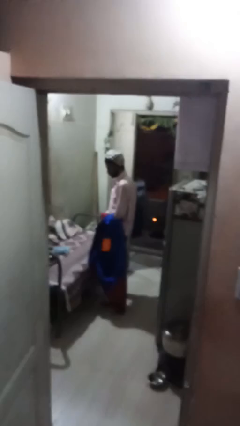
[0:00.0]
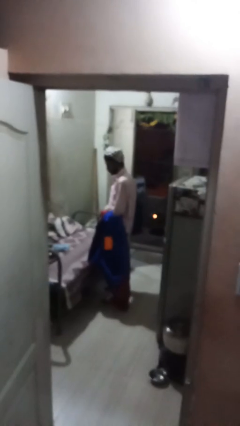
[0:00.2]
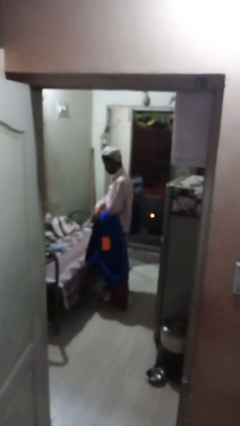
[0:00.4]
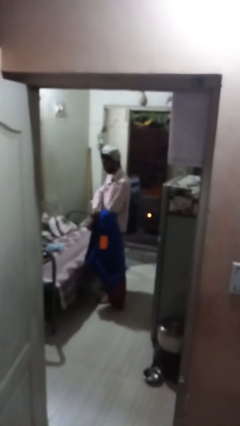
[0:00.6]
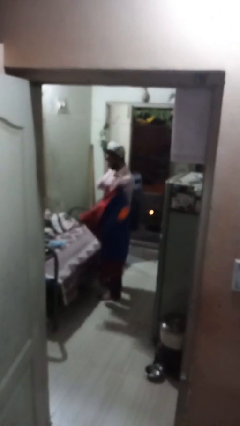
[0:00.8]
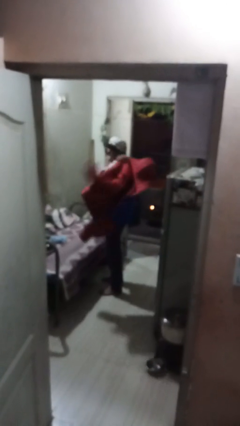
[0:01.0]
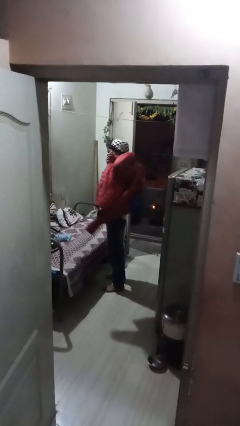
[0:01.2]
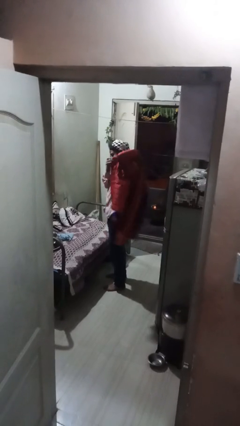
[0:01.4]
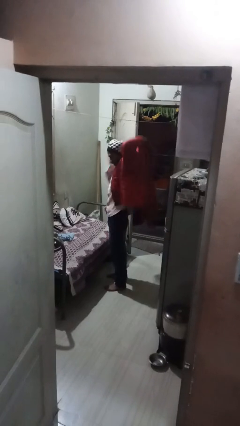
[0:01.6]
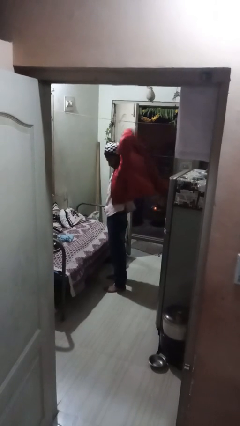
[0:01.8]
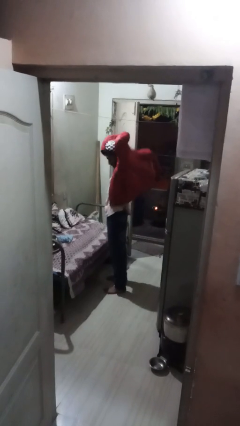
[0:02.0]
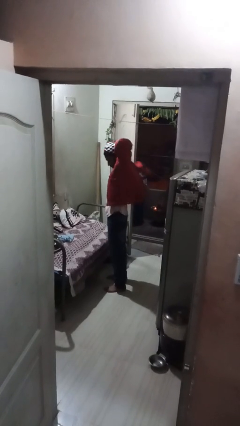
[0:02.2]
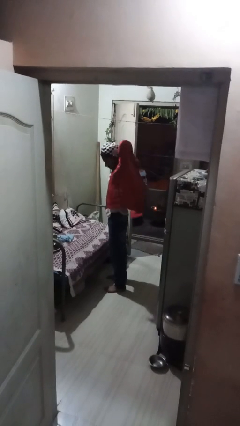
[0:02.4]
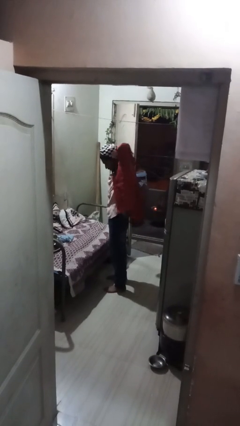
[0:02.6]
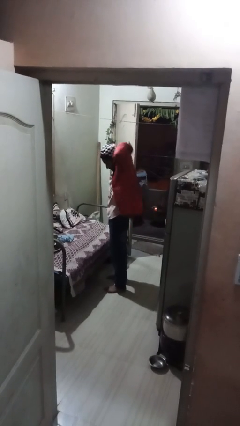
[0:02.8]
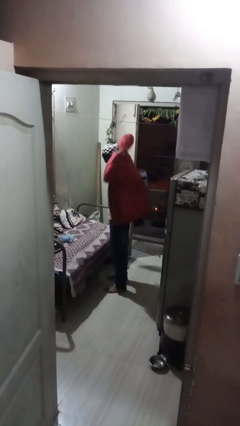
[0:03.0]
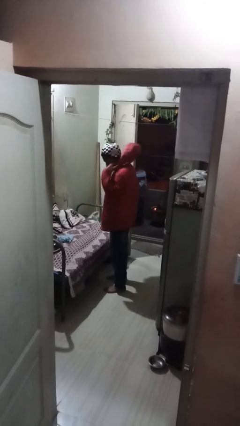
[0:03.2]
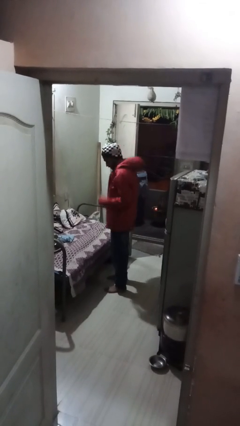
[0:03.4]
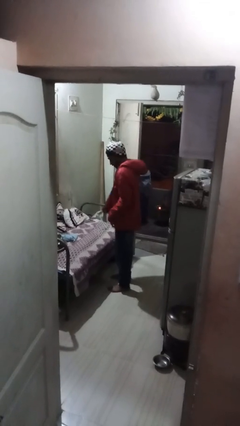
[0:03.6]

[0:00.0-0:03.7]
person puts on jacket

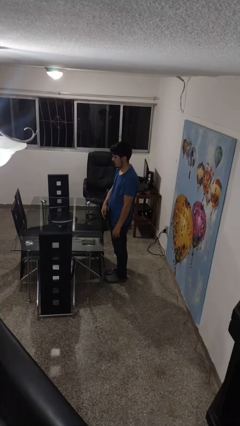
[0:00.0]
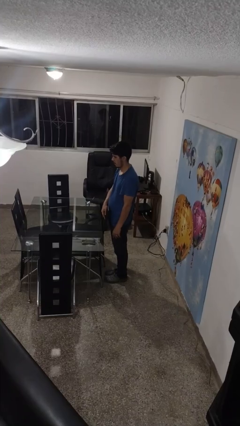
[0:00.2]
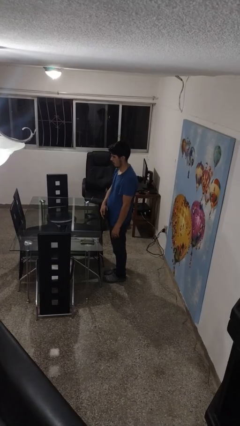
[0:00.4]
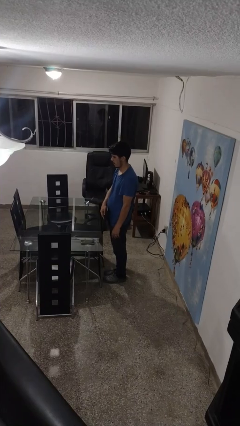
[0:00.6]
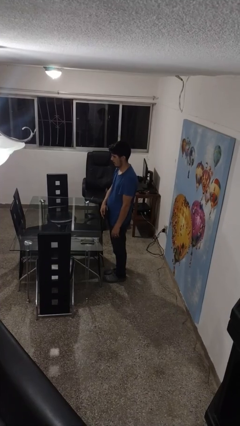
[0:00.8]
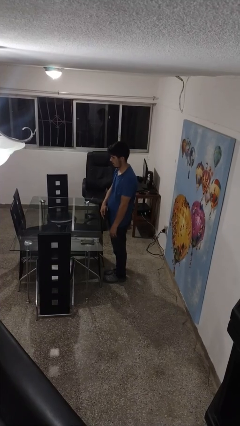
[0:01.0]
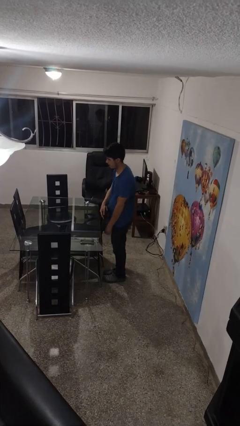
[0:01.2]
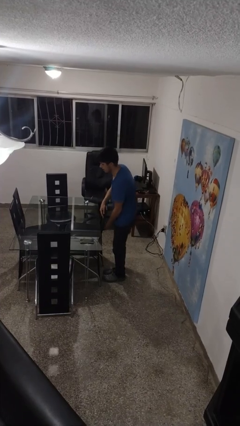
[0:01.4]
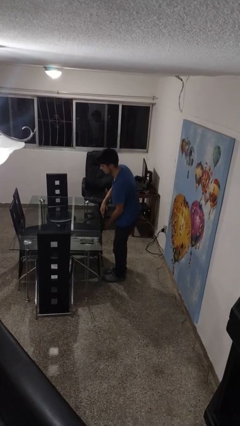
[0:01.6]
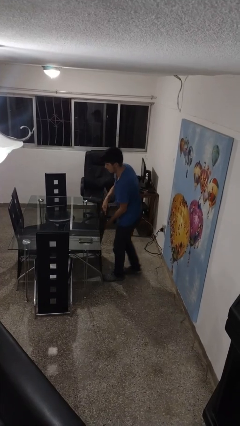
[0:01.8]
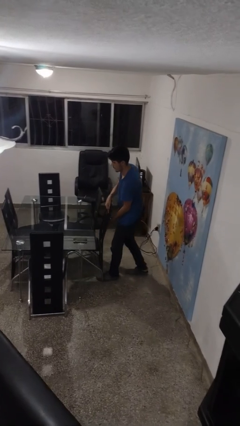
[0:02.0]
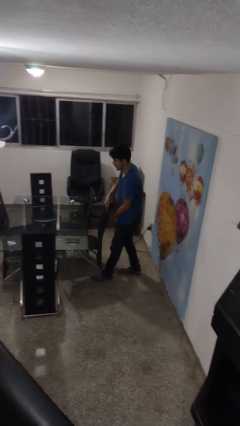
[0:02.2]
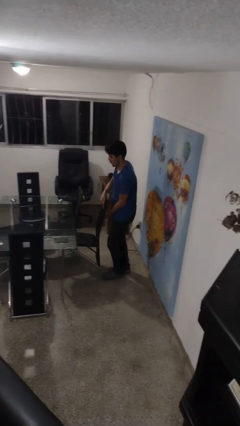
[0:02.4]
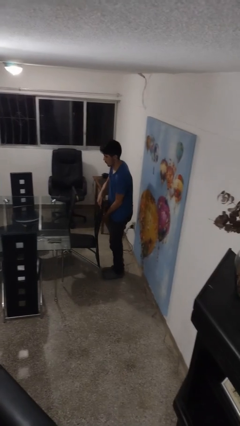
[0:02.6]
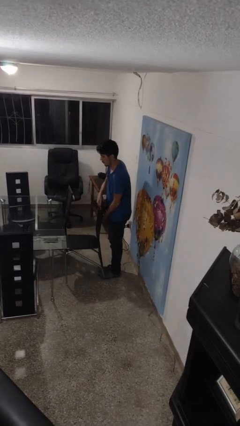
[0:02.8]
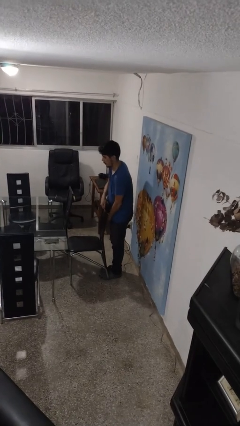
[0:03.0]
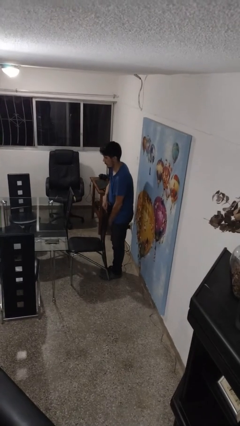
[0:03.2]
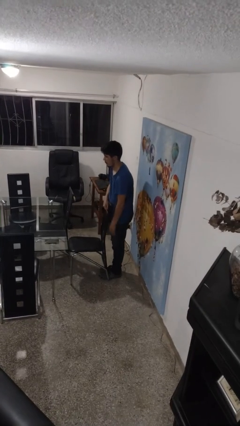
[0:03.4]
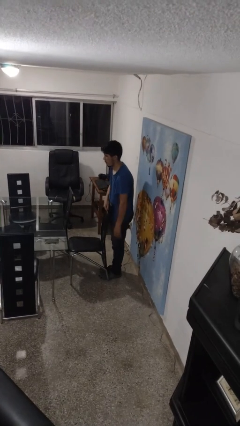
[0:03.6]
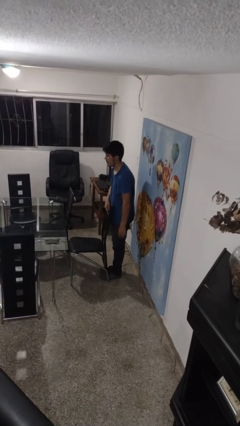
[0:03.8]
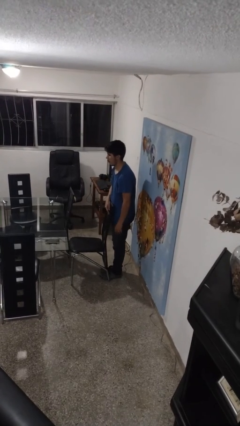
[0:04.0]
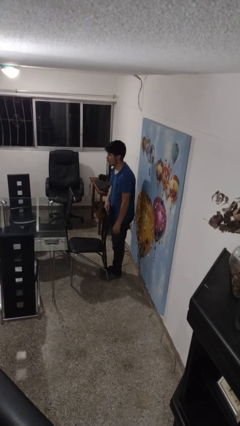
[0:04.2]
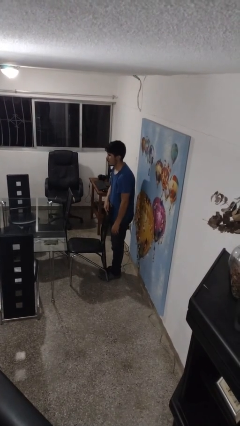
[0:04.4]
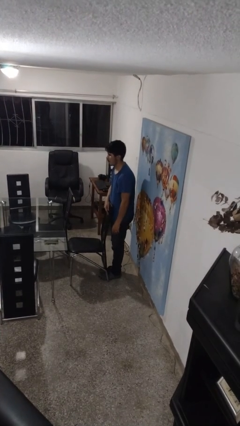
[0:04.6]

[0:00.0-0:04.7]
person pulls out chair

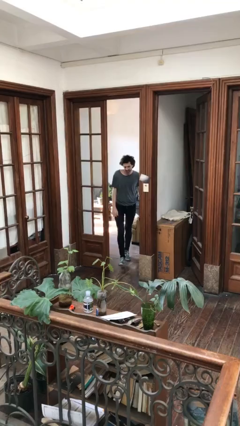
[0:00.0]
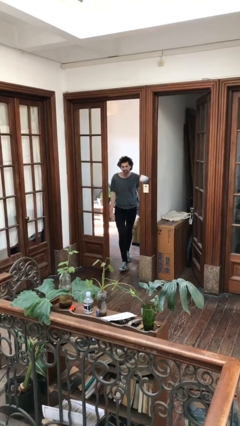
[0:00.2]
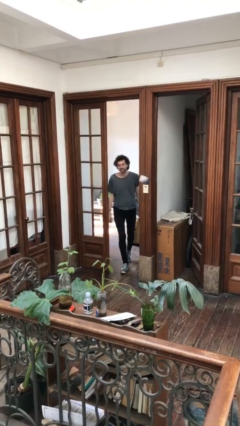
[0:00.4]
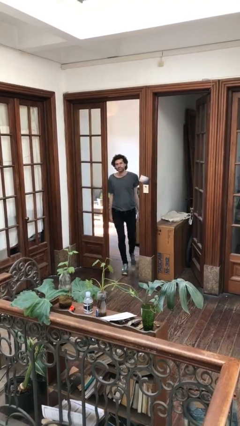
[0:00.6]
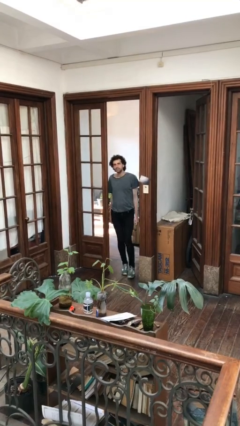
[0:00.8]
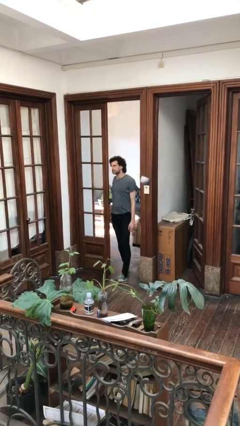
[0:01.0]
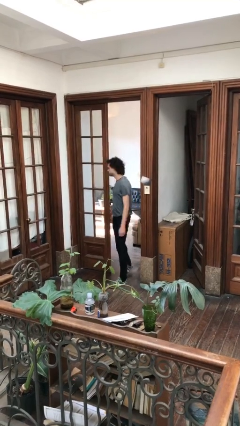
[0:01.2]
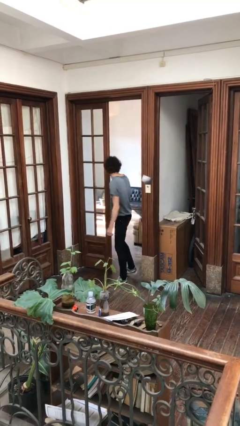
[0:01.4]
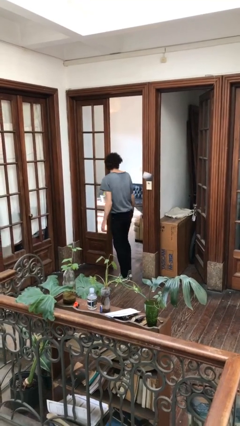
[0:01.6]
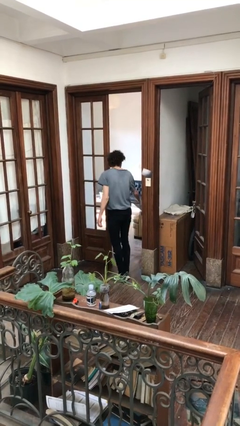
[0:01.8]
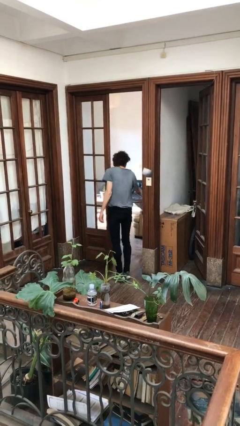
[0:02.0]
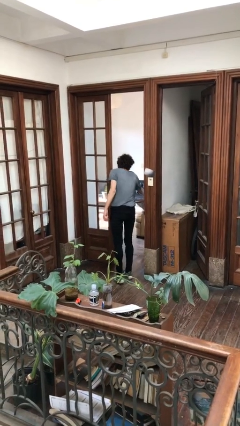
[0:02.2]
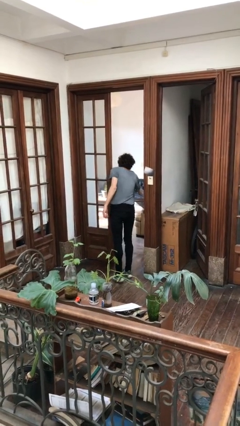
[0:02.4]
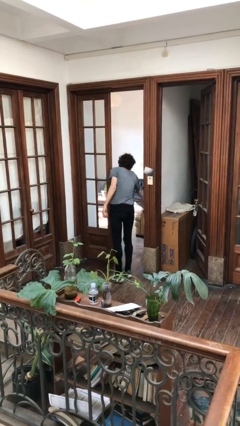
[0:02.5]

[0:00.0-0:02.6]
person enters scene through structure

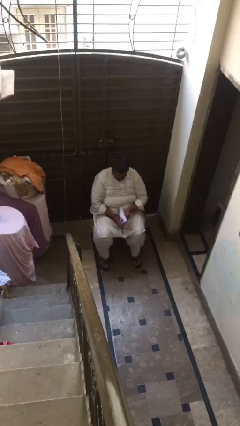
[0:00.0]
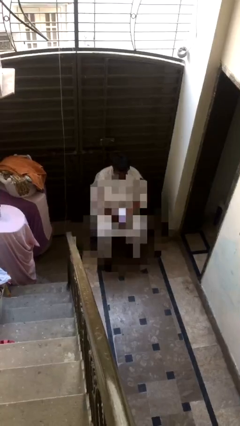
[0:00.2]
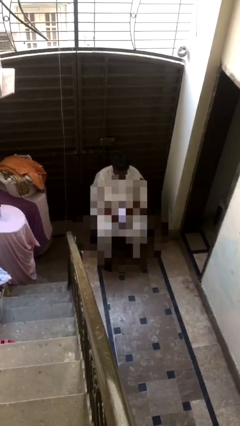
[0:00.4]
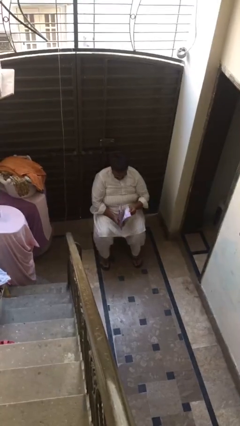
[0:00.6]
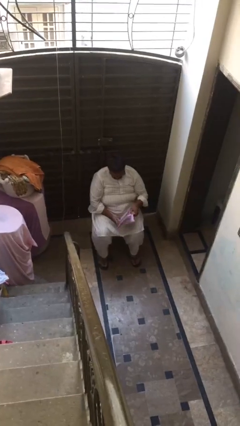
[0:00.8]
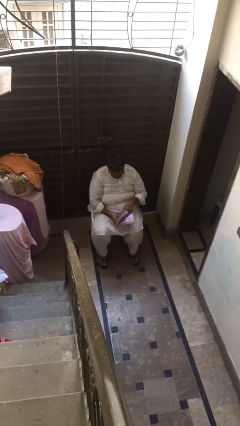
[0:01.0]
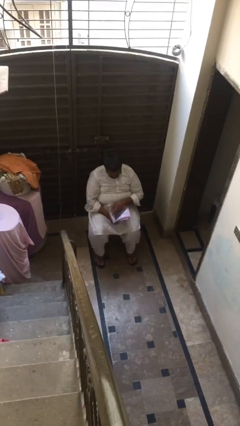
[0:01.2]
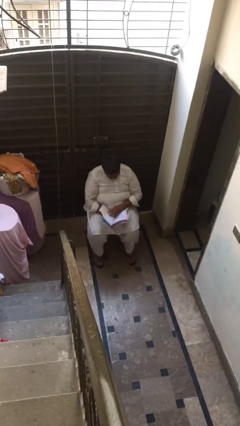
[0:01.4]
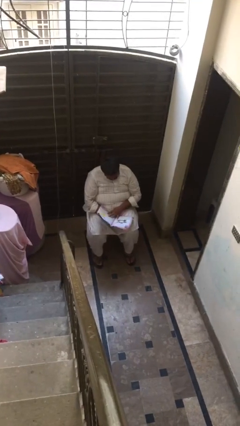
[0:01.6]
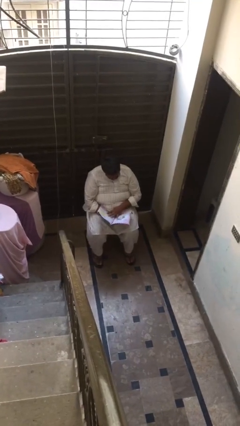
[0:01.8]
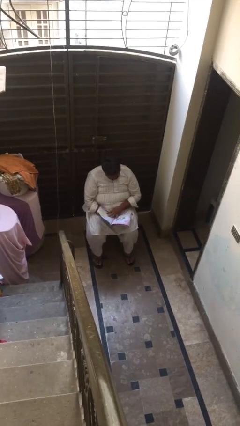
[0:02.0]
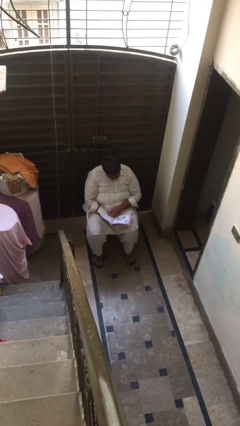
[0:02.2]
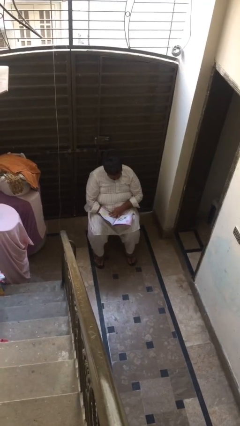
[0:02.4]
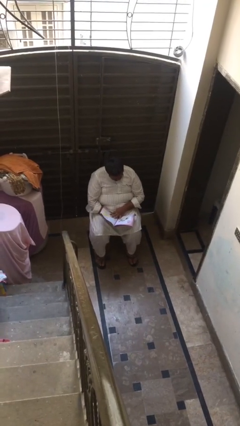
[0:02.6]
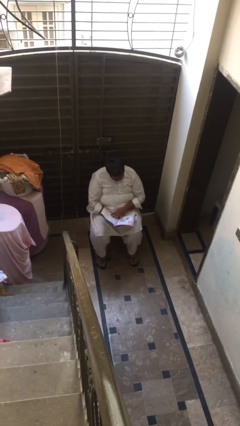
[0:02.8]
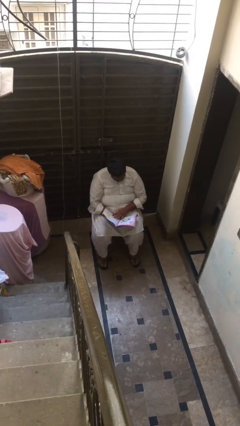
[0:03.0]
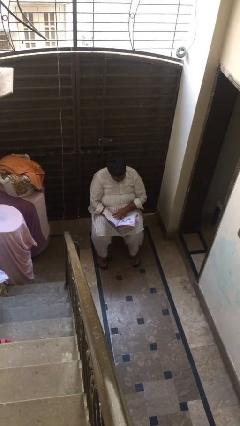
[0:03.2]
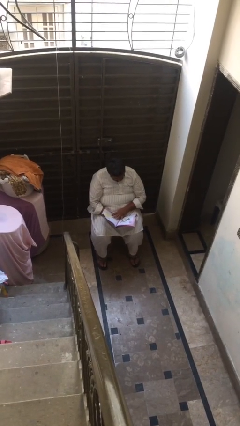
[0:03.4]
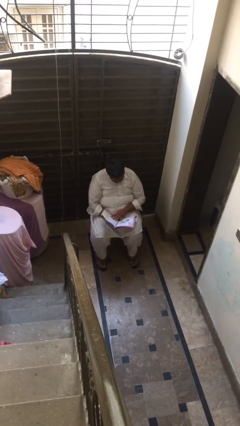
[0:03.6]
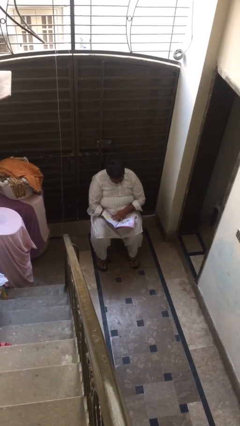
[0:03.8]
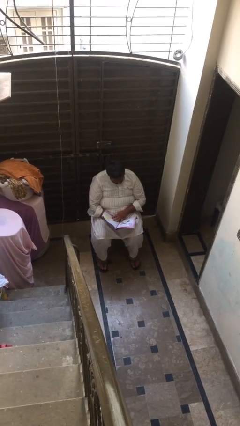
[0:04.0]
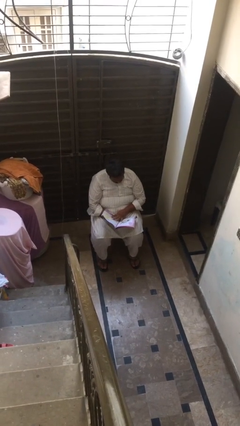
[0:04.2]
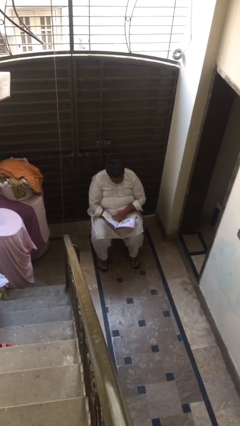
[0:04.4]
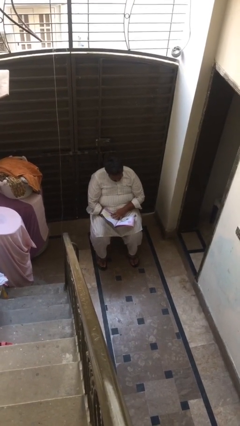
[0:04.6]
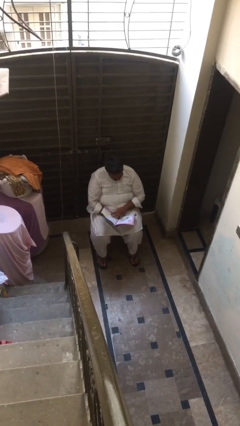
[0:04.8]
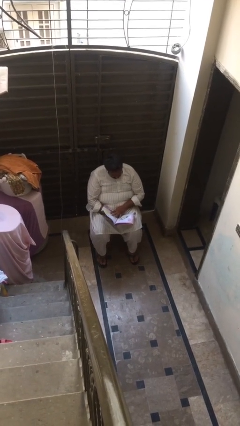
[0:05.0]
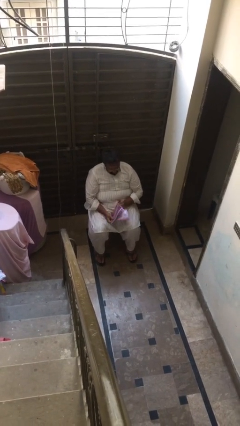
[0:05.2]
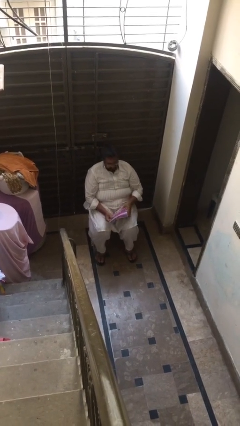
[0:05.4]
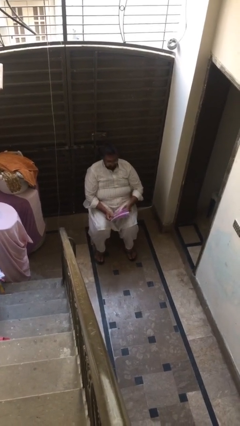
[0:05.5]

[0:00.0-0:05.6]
person reads document

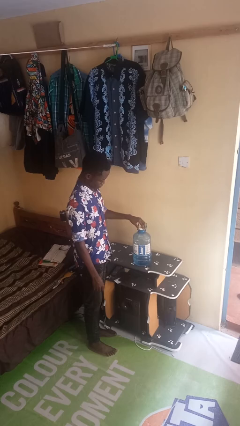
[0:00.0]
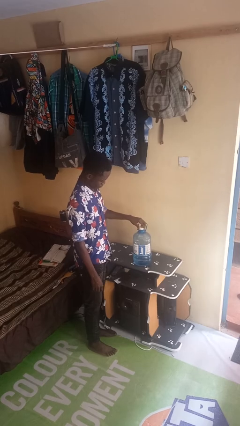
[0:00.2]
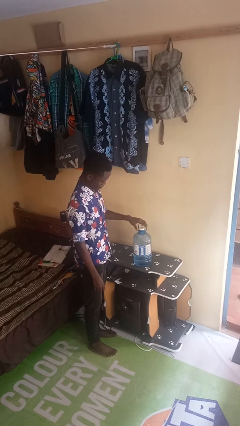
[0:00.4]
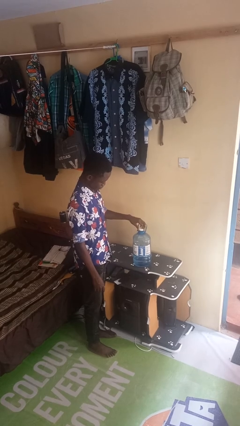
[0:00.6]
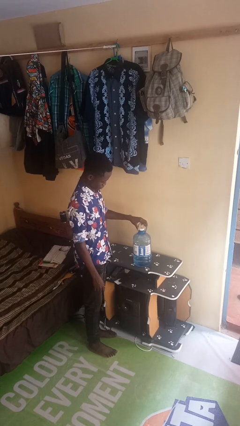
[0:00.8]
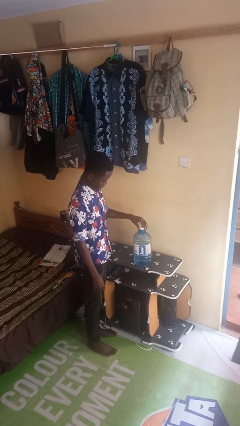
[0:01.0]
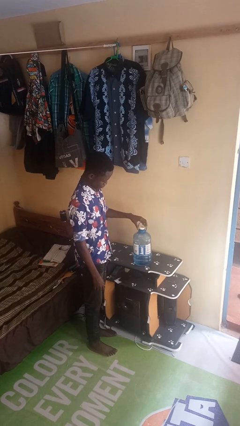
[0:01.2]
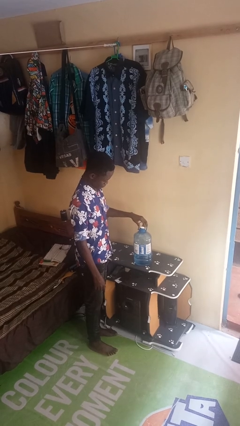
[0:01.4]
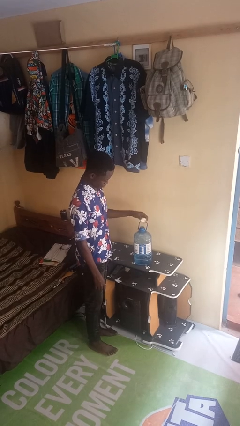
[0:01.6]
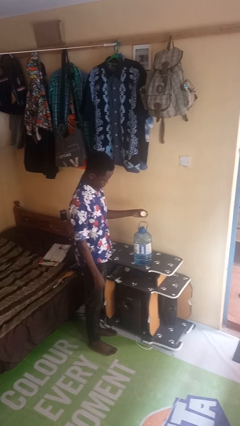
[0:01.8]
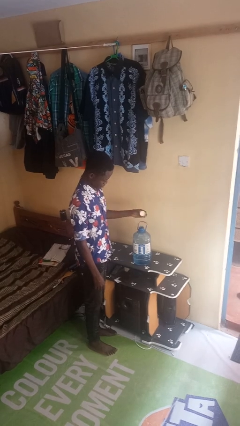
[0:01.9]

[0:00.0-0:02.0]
person unscrews lid from bottle
